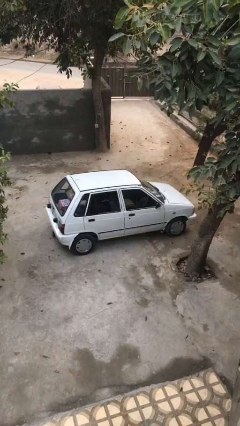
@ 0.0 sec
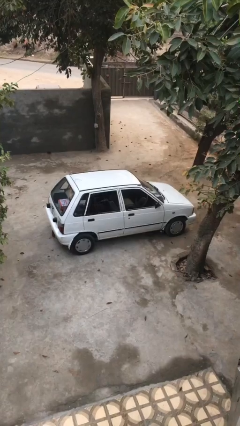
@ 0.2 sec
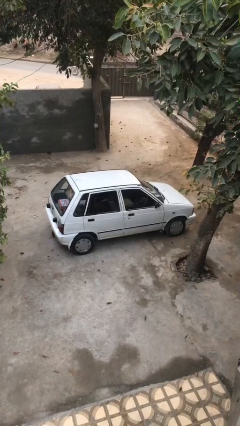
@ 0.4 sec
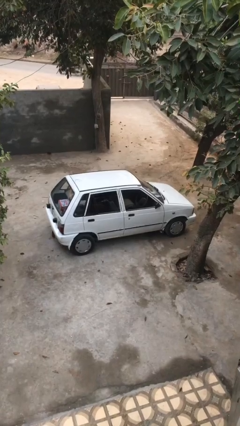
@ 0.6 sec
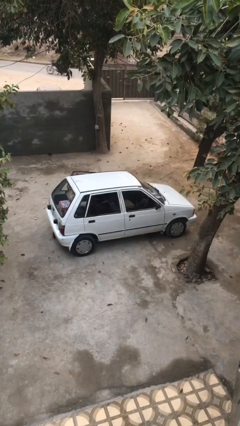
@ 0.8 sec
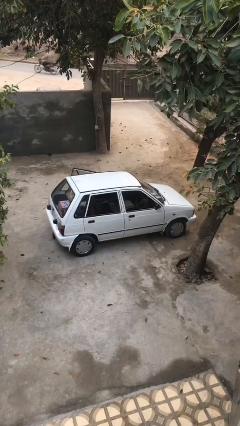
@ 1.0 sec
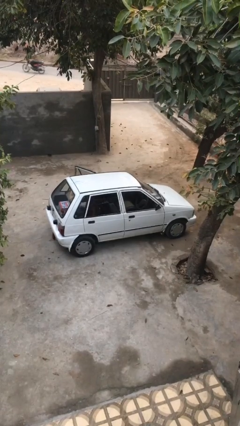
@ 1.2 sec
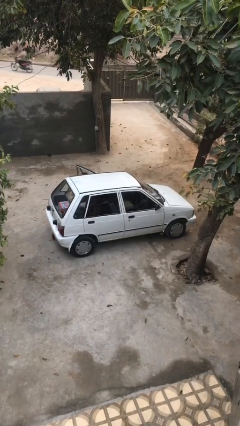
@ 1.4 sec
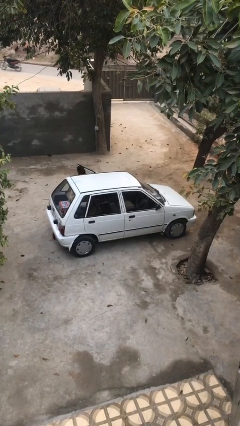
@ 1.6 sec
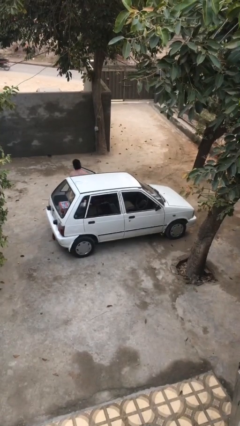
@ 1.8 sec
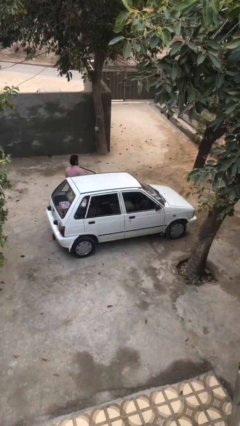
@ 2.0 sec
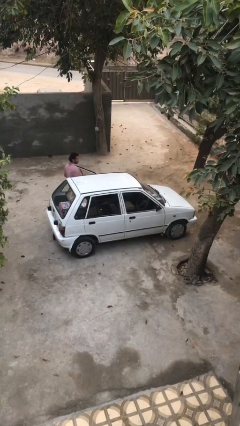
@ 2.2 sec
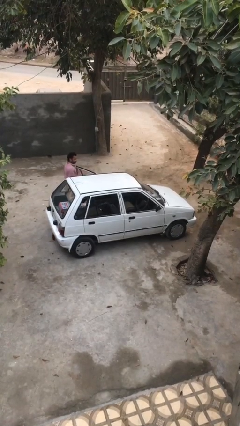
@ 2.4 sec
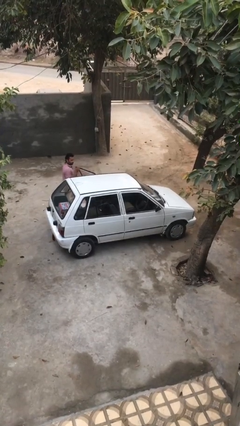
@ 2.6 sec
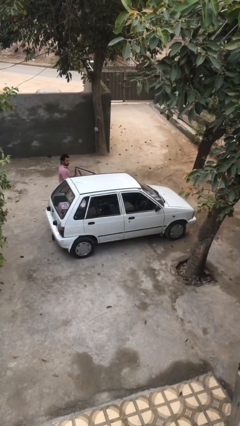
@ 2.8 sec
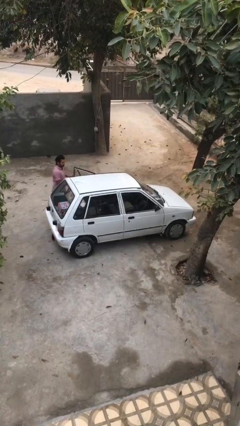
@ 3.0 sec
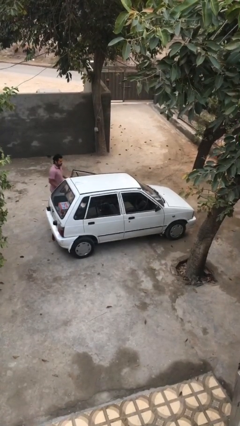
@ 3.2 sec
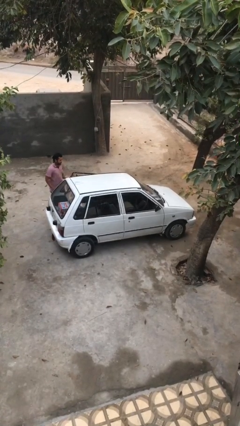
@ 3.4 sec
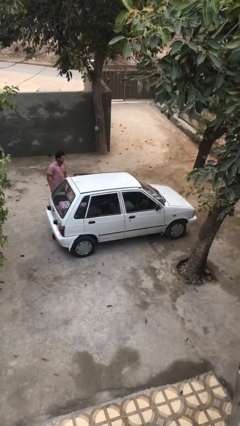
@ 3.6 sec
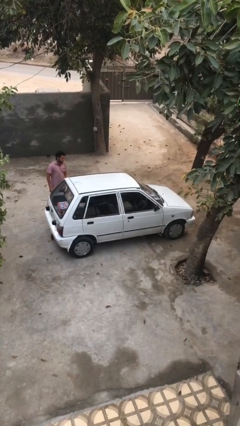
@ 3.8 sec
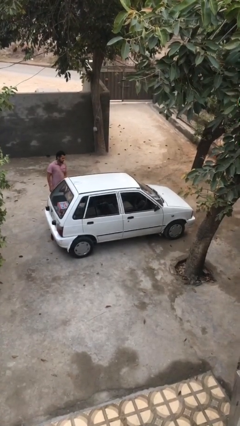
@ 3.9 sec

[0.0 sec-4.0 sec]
car drops off person

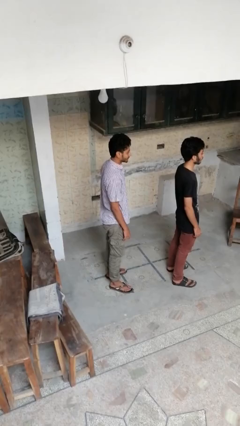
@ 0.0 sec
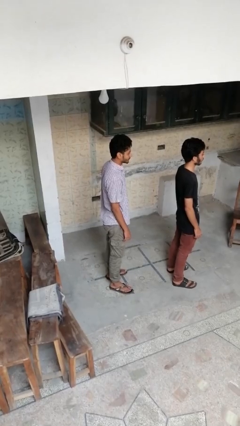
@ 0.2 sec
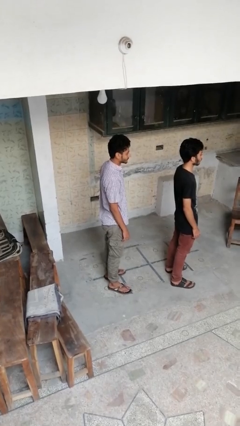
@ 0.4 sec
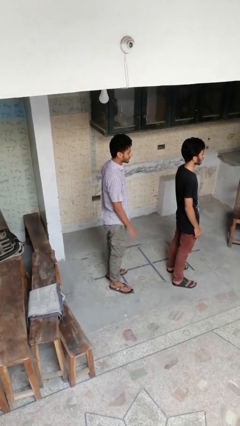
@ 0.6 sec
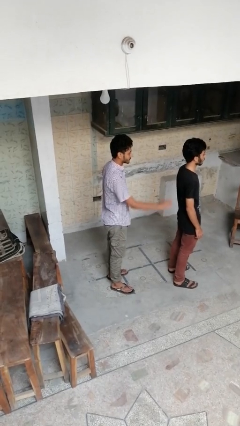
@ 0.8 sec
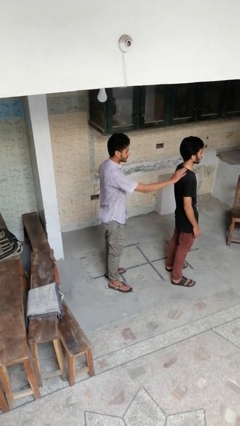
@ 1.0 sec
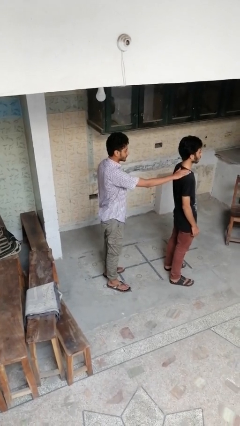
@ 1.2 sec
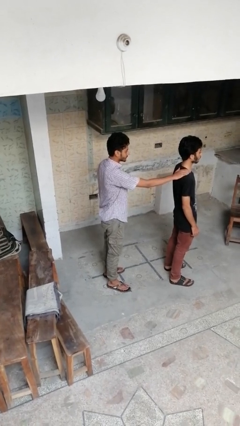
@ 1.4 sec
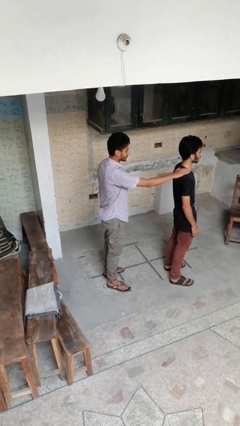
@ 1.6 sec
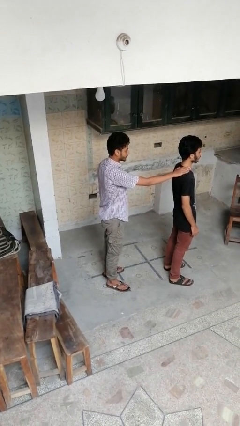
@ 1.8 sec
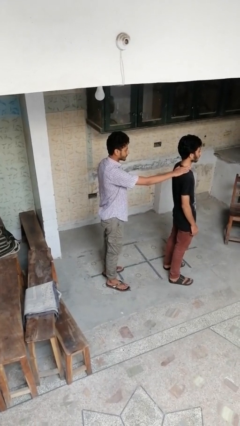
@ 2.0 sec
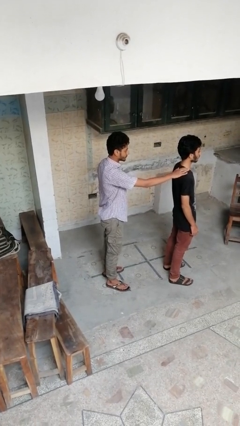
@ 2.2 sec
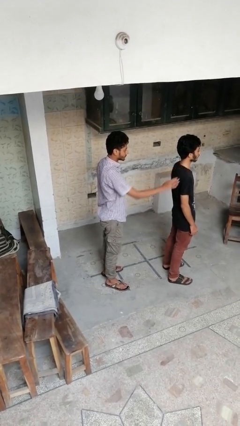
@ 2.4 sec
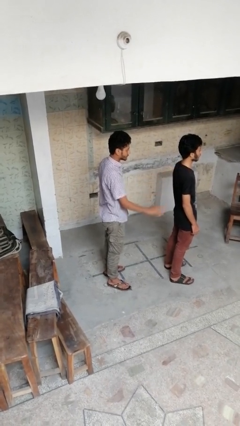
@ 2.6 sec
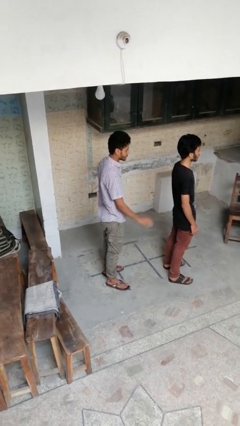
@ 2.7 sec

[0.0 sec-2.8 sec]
person touches back of person

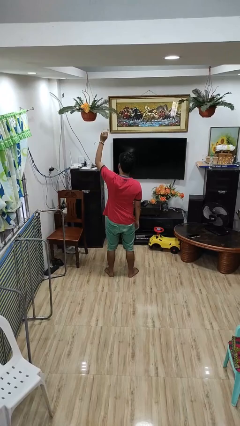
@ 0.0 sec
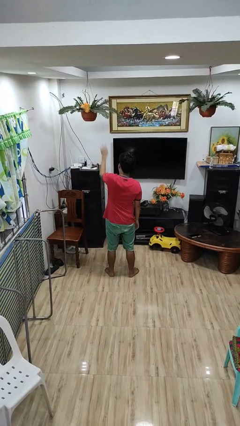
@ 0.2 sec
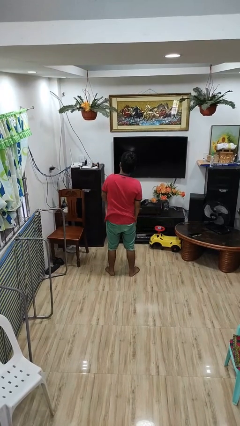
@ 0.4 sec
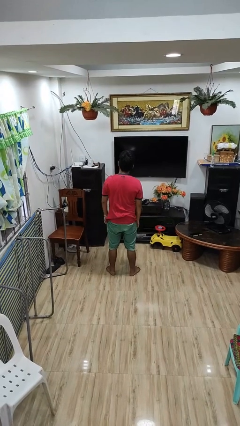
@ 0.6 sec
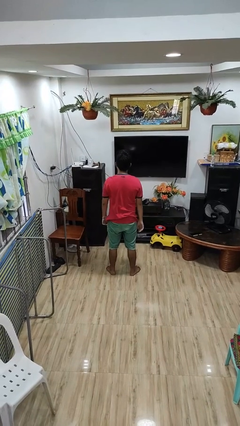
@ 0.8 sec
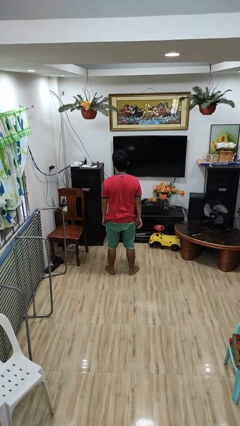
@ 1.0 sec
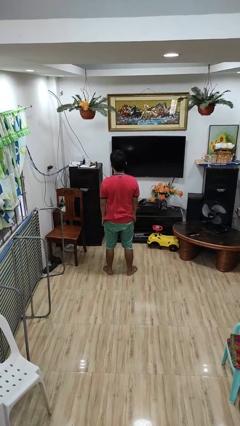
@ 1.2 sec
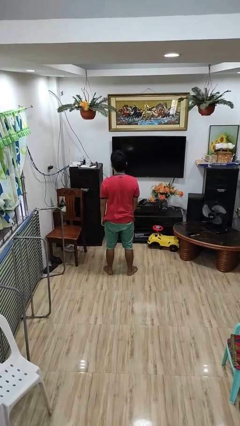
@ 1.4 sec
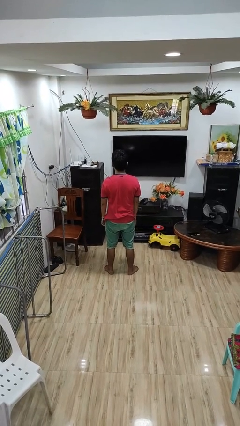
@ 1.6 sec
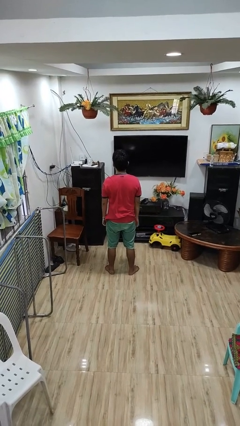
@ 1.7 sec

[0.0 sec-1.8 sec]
person gestures swipe down

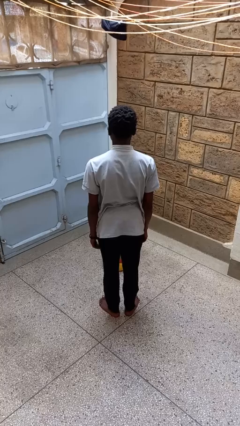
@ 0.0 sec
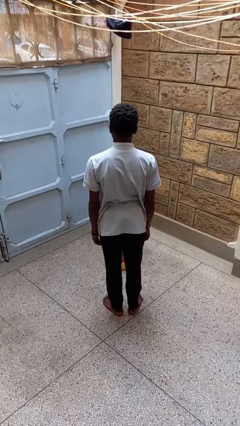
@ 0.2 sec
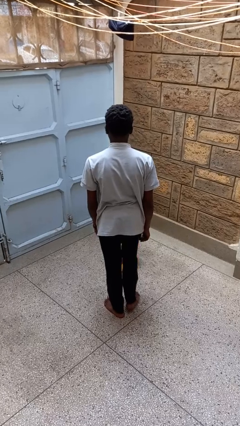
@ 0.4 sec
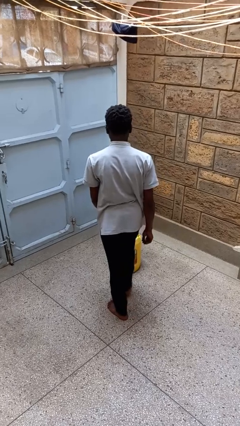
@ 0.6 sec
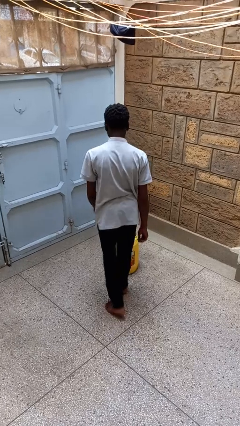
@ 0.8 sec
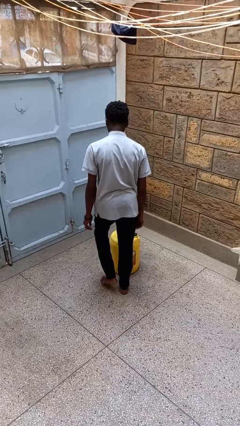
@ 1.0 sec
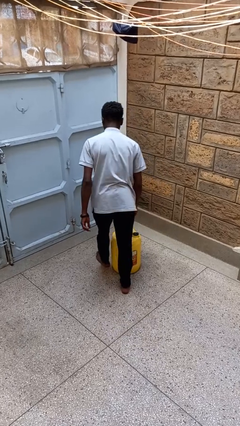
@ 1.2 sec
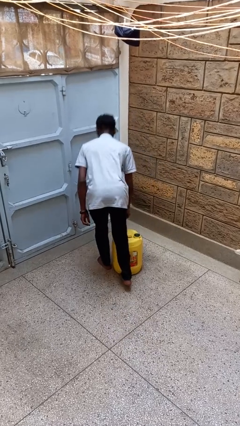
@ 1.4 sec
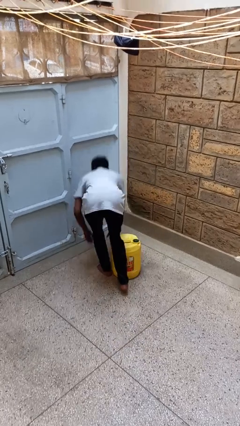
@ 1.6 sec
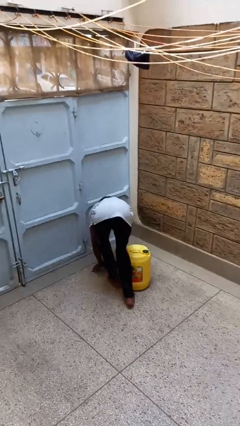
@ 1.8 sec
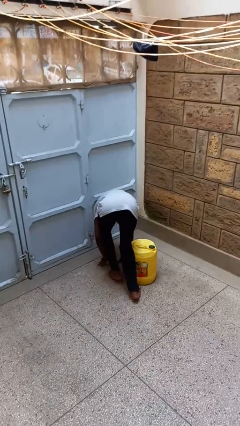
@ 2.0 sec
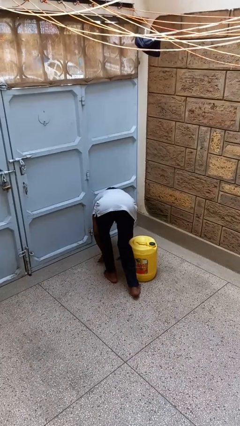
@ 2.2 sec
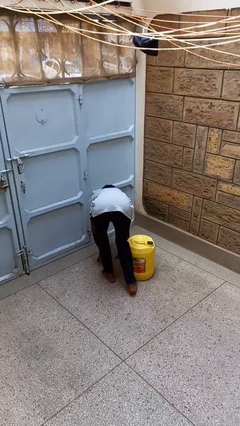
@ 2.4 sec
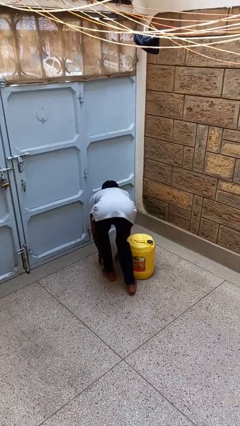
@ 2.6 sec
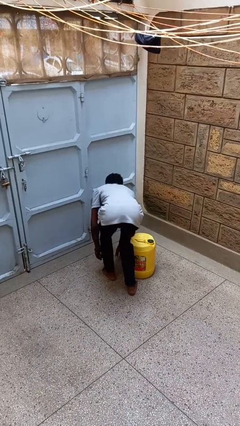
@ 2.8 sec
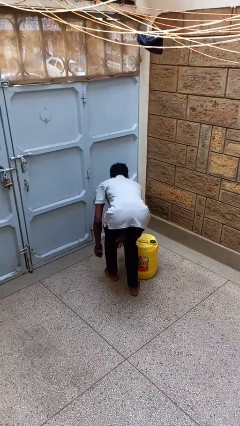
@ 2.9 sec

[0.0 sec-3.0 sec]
person trips on object on floor

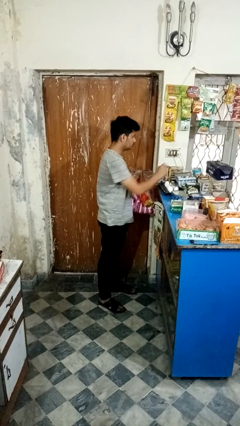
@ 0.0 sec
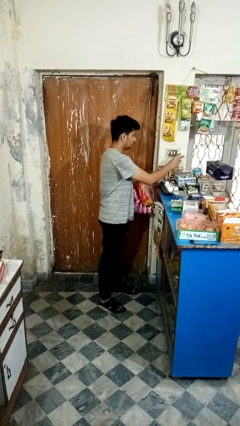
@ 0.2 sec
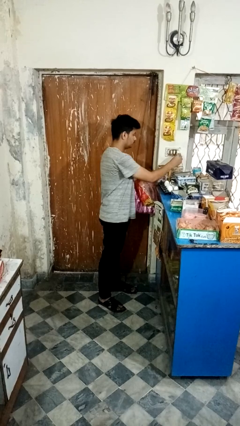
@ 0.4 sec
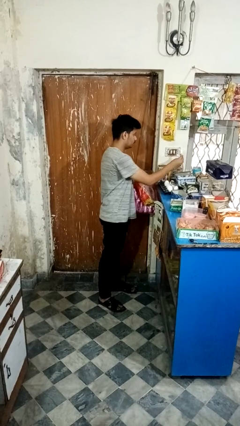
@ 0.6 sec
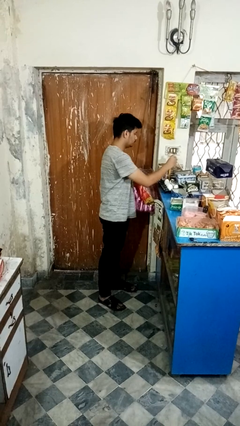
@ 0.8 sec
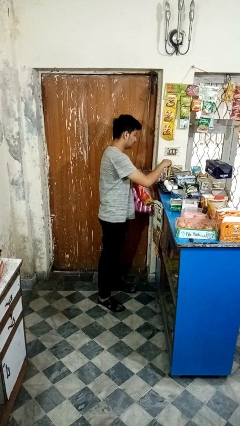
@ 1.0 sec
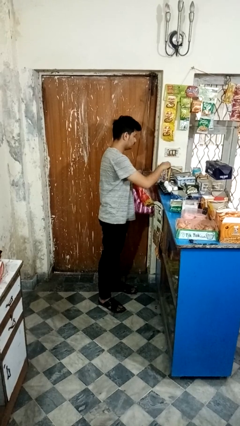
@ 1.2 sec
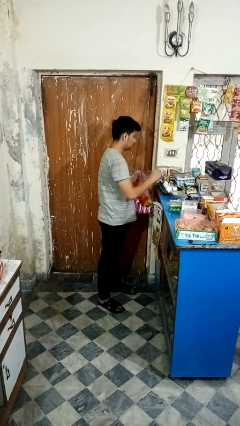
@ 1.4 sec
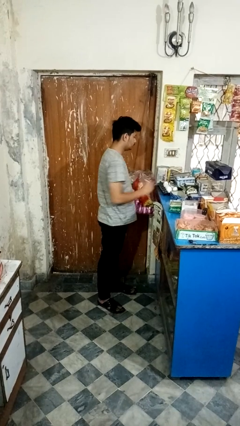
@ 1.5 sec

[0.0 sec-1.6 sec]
person unplugs from electrical socket

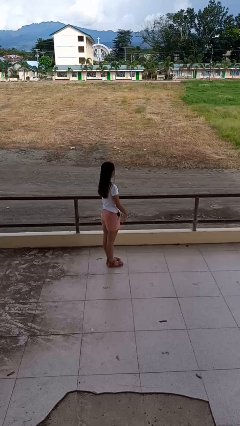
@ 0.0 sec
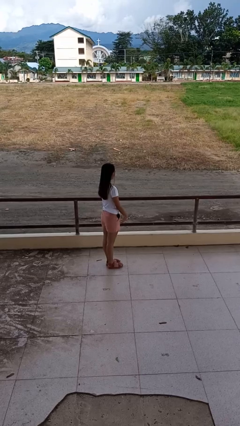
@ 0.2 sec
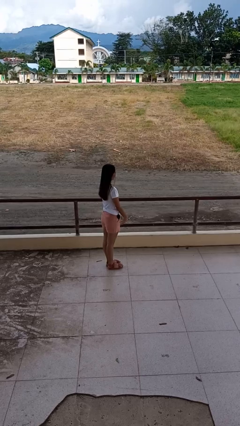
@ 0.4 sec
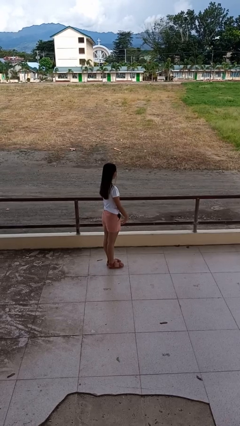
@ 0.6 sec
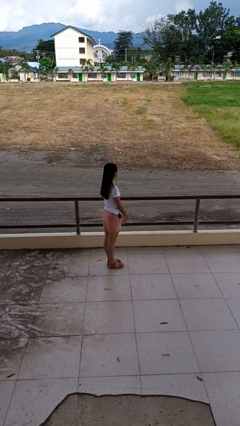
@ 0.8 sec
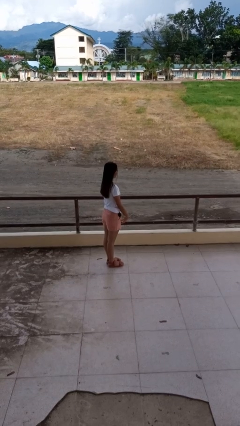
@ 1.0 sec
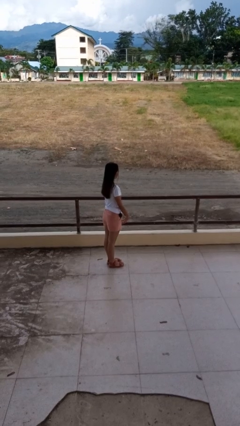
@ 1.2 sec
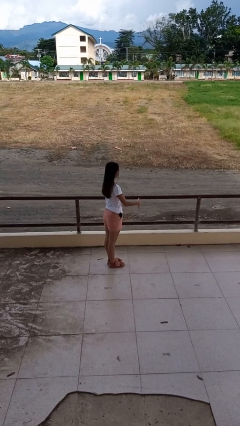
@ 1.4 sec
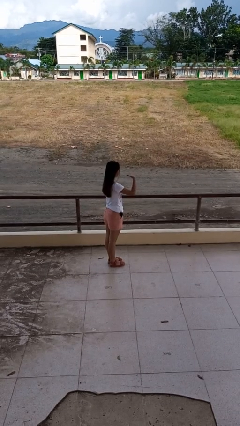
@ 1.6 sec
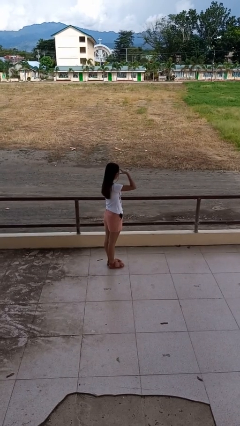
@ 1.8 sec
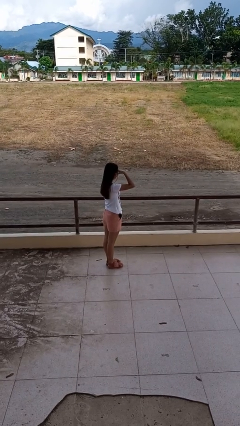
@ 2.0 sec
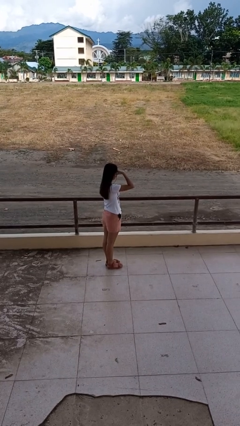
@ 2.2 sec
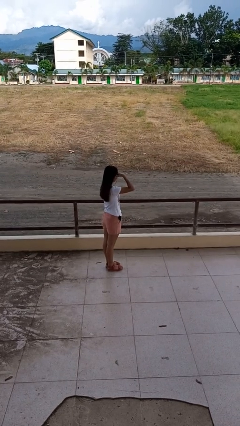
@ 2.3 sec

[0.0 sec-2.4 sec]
person shades eyes

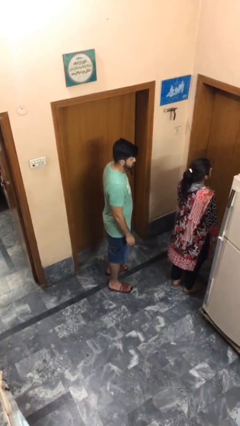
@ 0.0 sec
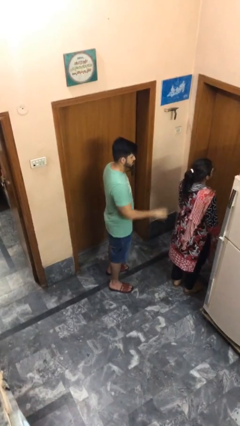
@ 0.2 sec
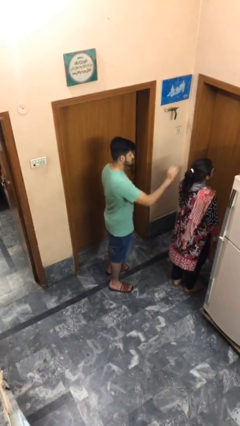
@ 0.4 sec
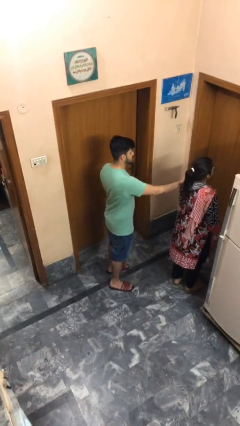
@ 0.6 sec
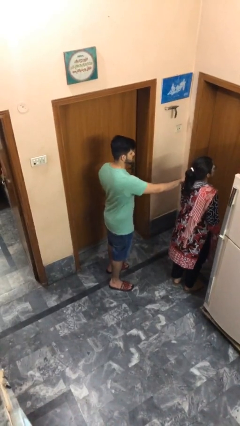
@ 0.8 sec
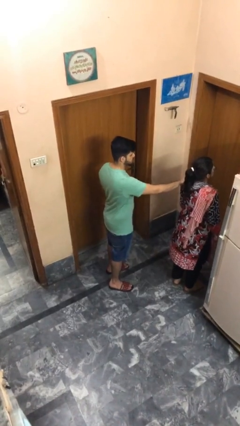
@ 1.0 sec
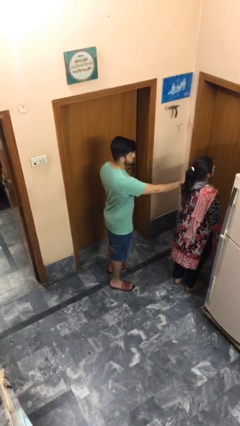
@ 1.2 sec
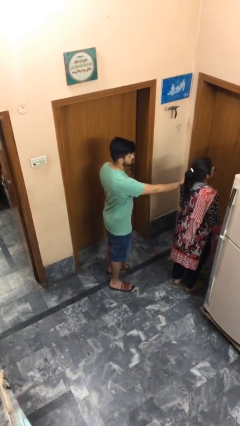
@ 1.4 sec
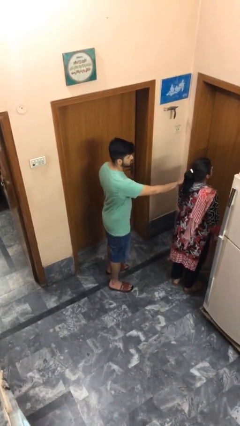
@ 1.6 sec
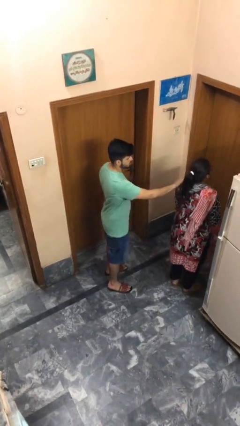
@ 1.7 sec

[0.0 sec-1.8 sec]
person grabs person by shoulder
